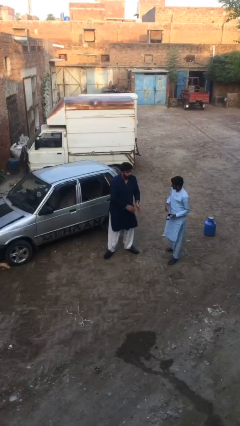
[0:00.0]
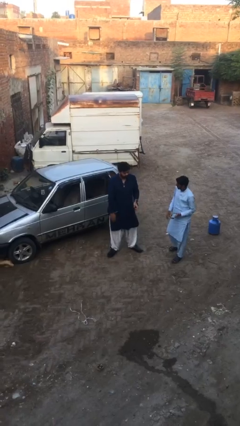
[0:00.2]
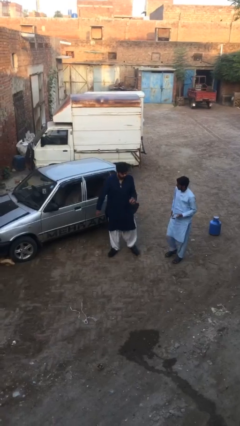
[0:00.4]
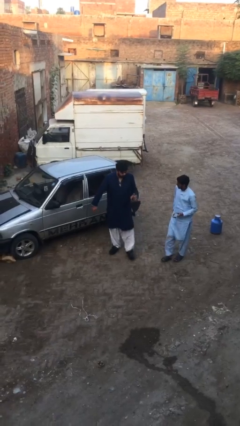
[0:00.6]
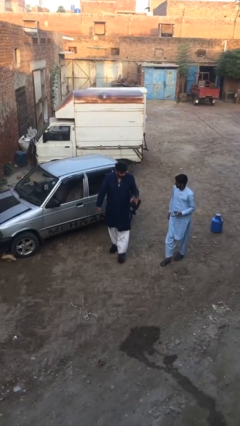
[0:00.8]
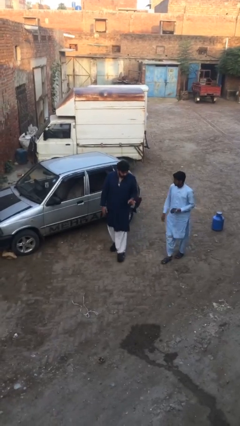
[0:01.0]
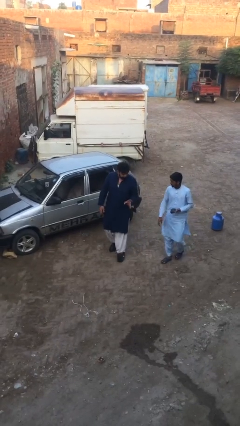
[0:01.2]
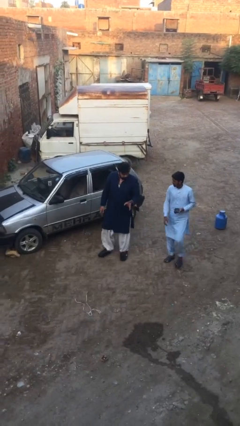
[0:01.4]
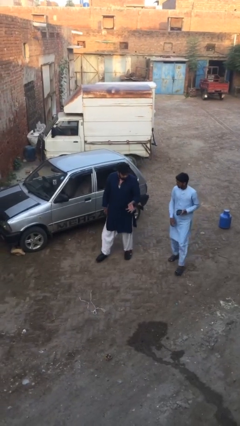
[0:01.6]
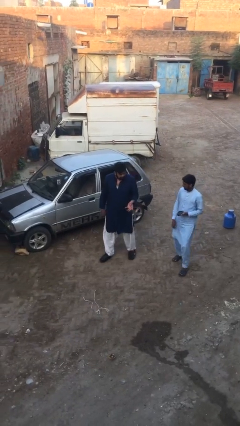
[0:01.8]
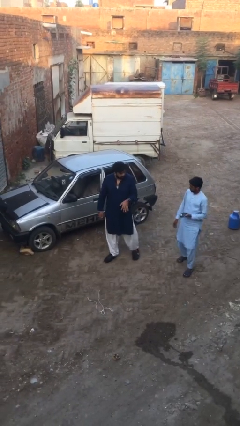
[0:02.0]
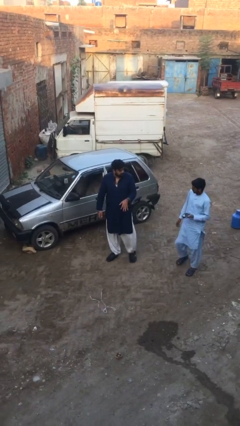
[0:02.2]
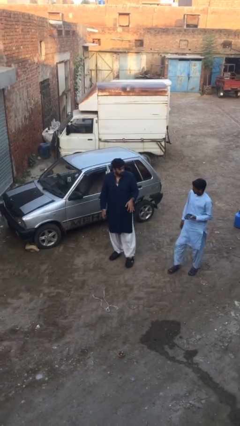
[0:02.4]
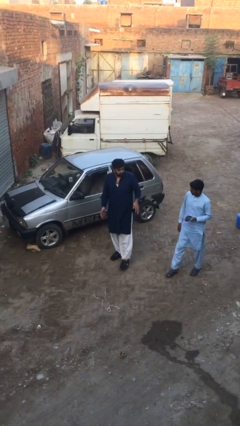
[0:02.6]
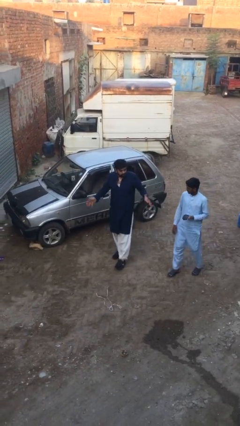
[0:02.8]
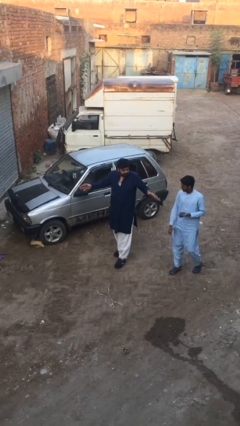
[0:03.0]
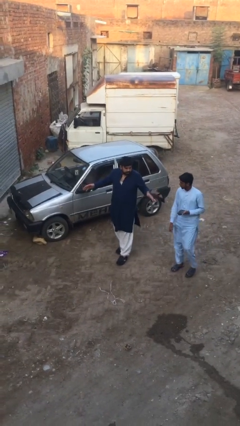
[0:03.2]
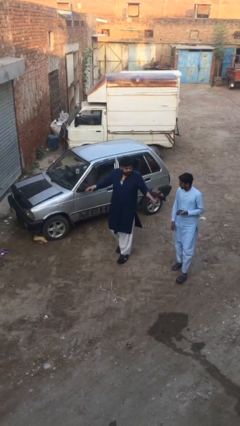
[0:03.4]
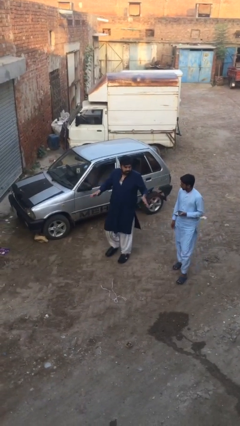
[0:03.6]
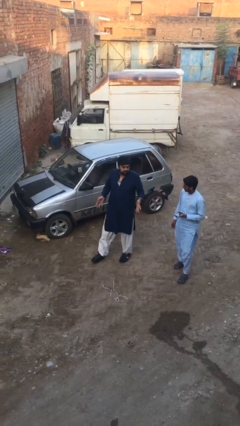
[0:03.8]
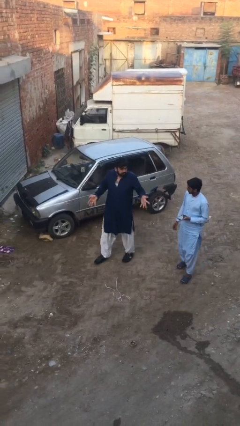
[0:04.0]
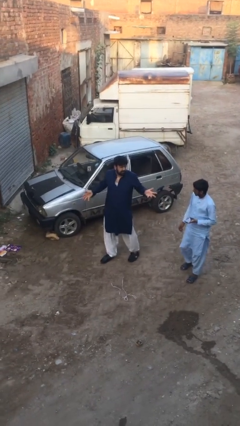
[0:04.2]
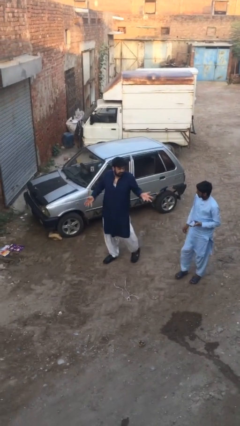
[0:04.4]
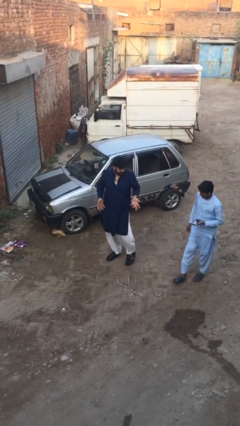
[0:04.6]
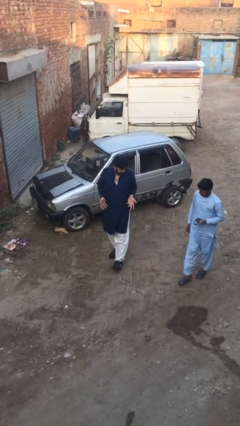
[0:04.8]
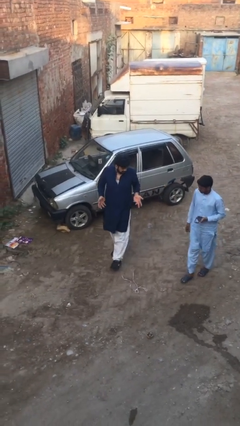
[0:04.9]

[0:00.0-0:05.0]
person talks to person

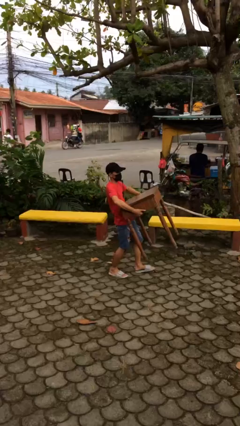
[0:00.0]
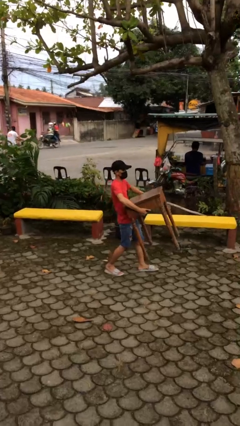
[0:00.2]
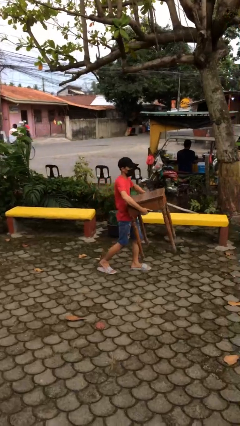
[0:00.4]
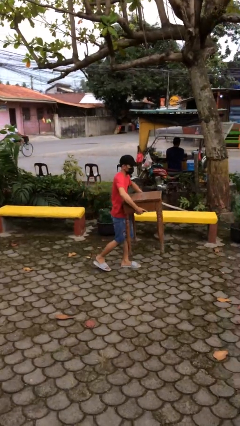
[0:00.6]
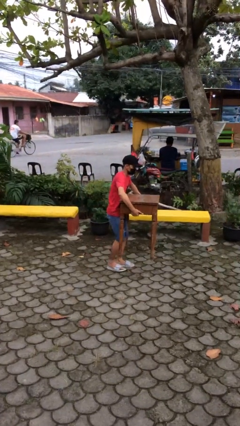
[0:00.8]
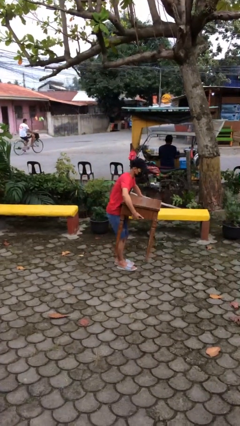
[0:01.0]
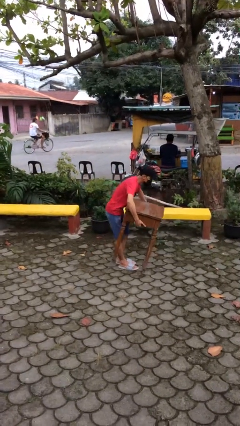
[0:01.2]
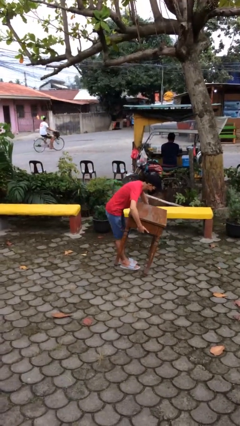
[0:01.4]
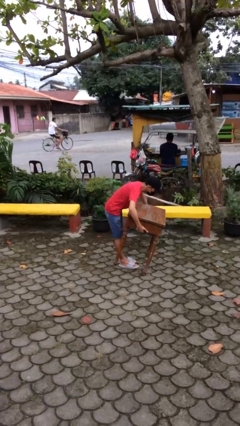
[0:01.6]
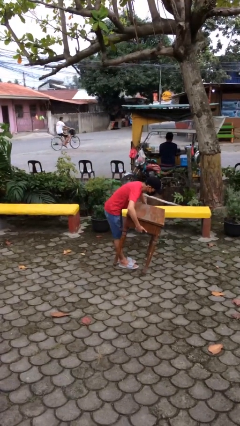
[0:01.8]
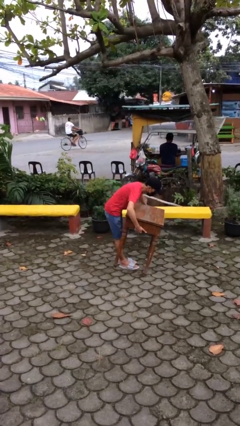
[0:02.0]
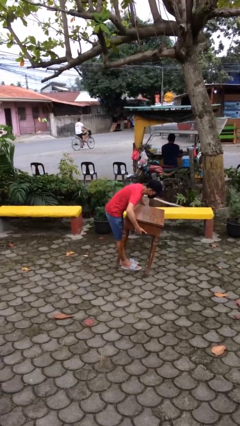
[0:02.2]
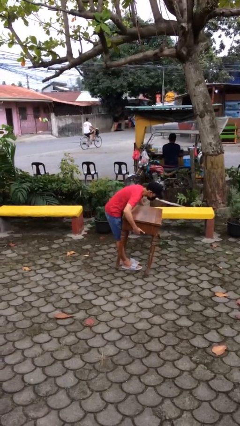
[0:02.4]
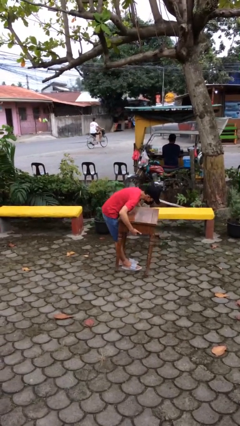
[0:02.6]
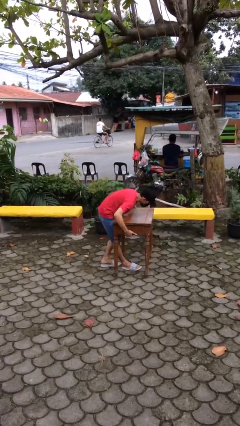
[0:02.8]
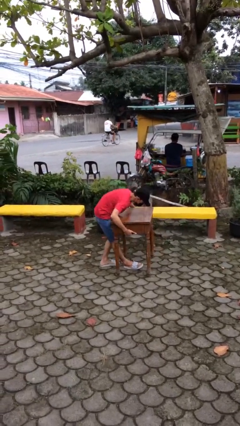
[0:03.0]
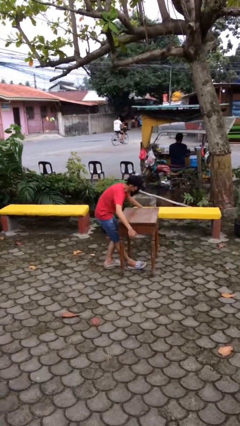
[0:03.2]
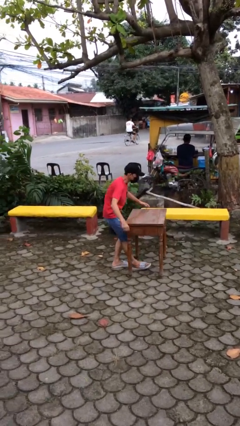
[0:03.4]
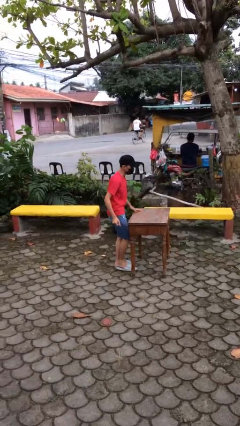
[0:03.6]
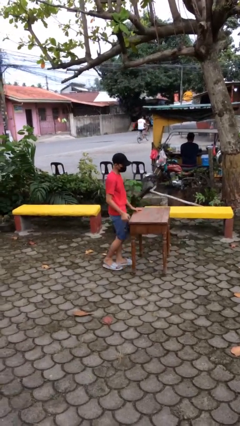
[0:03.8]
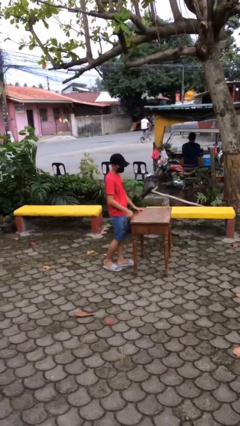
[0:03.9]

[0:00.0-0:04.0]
person puts down object on floor

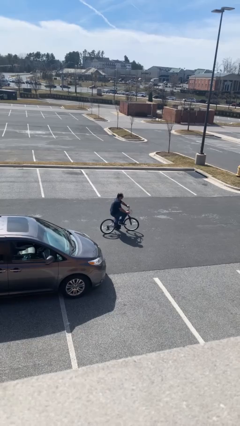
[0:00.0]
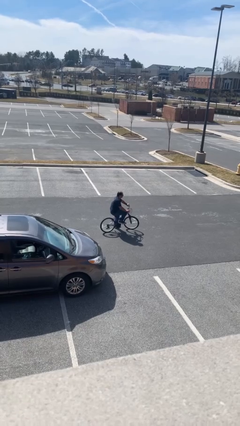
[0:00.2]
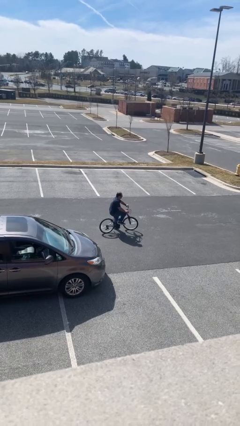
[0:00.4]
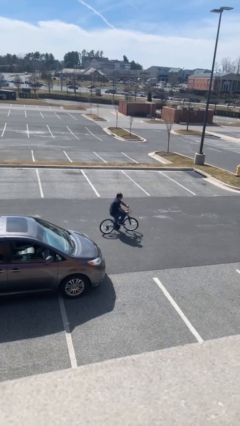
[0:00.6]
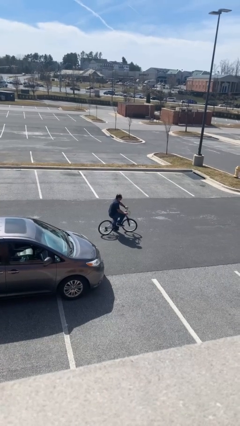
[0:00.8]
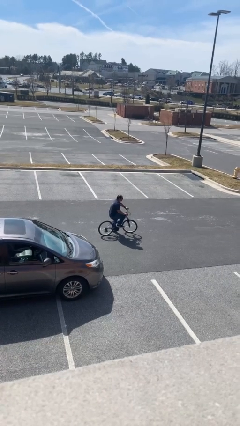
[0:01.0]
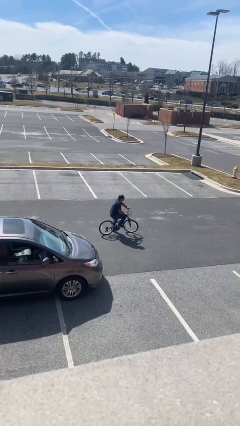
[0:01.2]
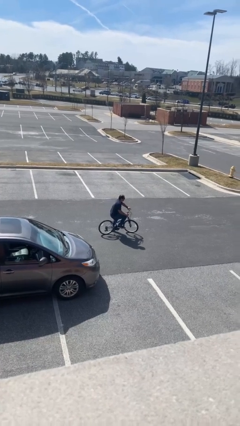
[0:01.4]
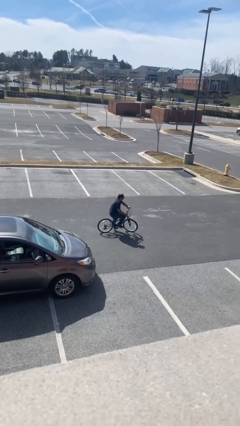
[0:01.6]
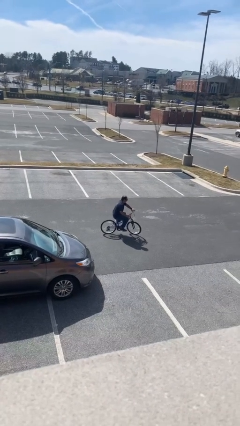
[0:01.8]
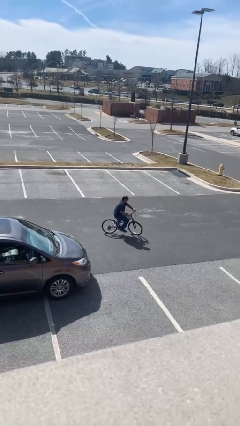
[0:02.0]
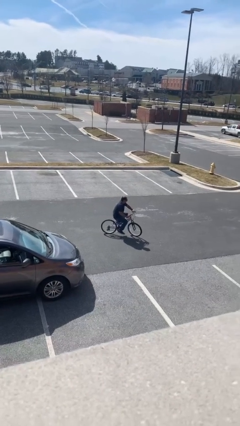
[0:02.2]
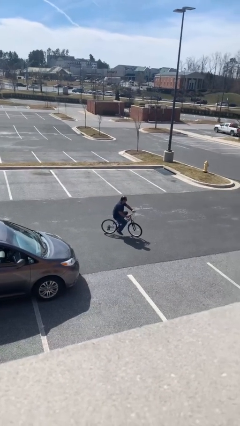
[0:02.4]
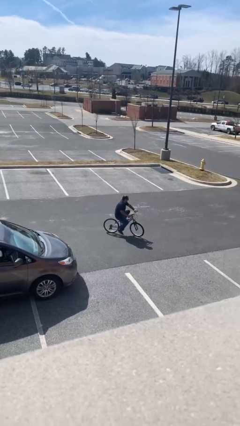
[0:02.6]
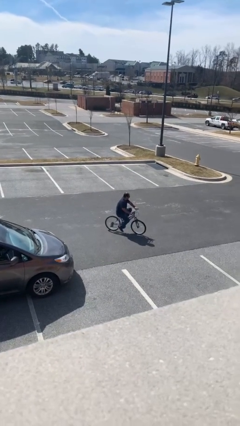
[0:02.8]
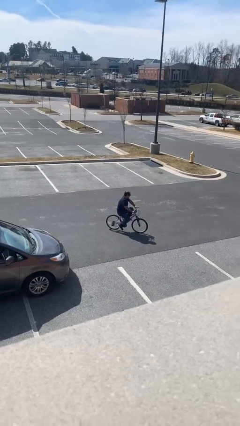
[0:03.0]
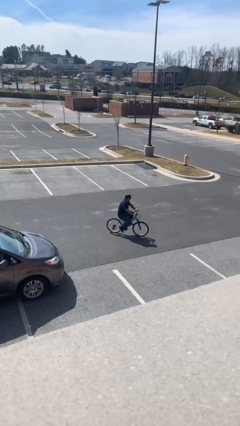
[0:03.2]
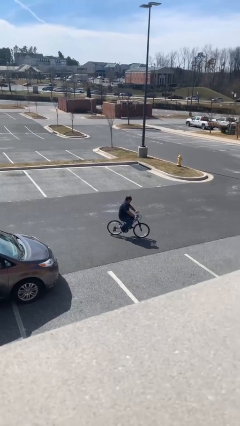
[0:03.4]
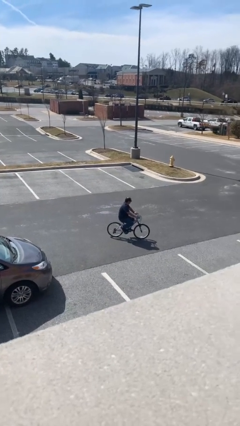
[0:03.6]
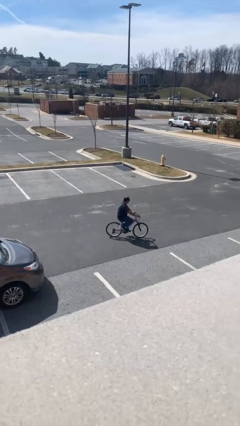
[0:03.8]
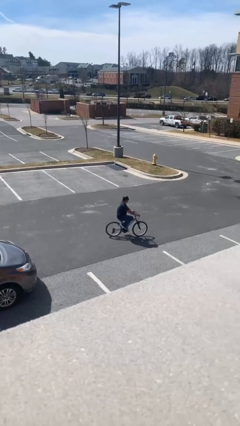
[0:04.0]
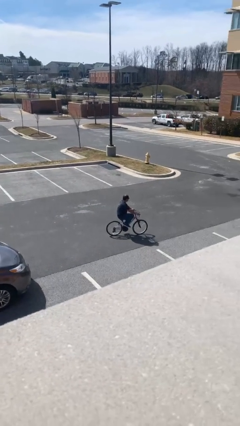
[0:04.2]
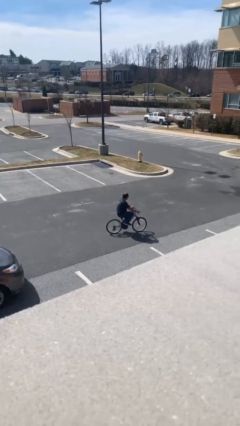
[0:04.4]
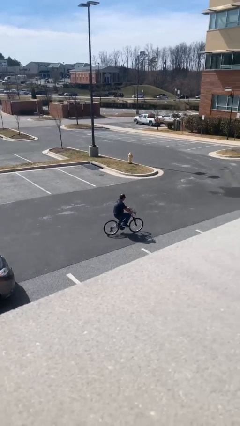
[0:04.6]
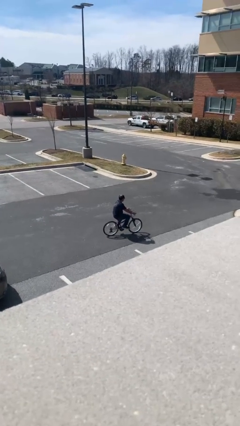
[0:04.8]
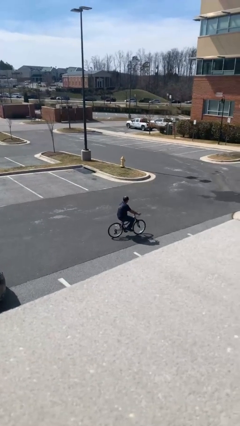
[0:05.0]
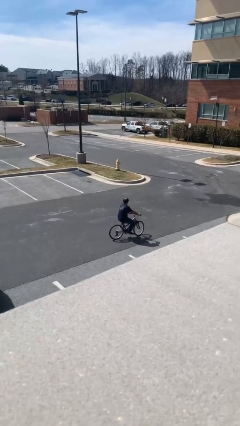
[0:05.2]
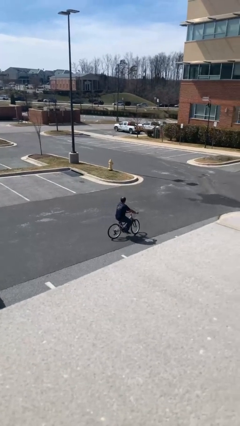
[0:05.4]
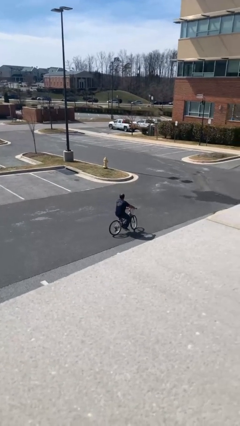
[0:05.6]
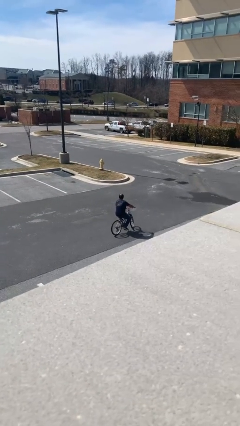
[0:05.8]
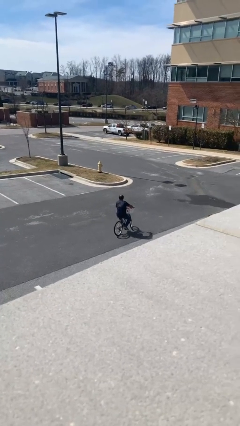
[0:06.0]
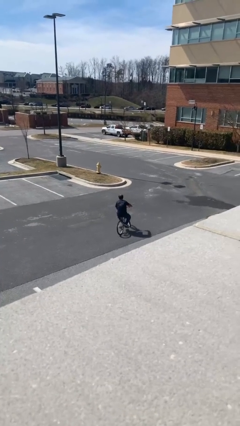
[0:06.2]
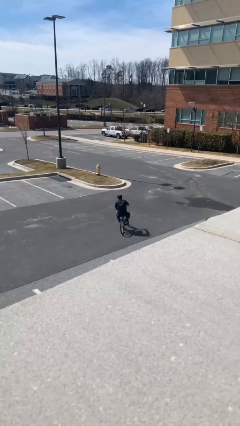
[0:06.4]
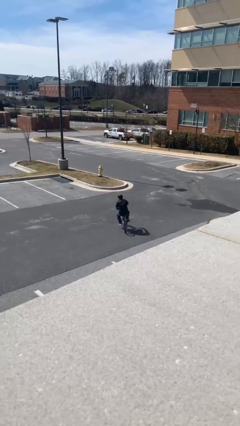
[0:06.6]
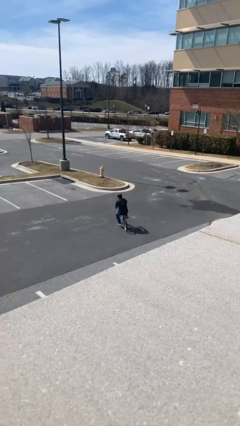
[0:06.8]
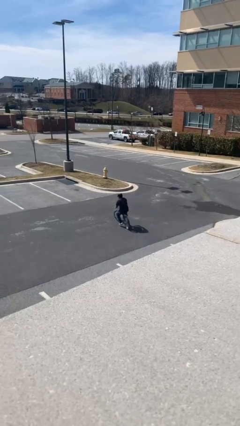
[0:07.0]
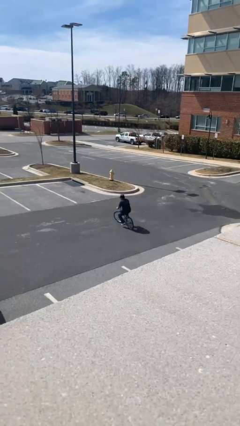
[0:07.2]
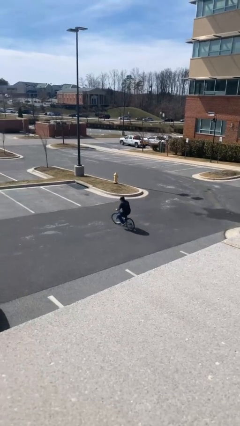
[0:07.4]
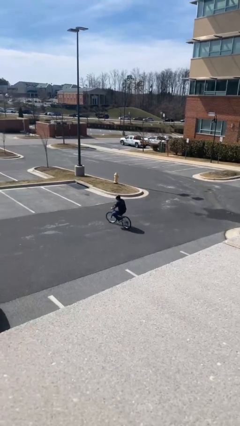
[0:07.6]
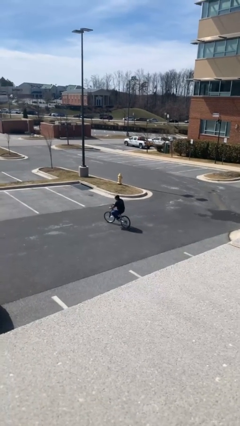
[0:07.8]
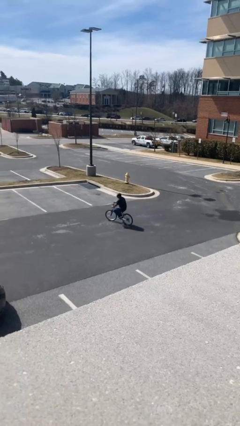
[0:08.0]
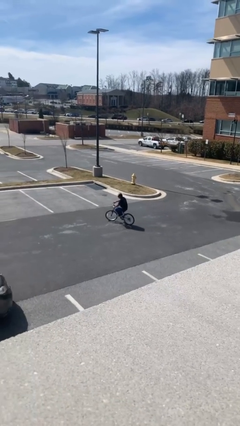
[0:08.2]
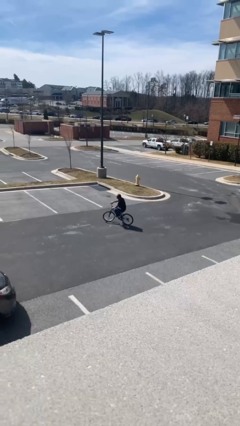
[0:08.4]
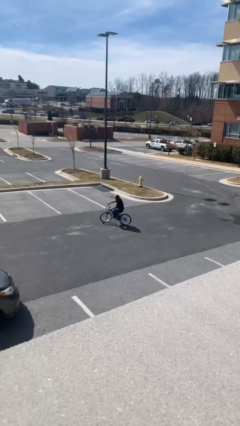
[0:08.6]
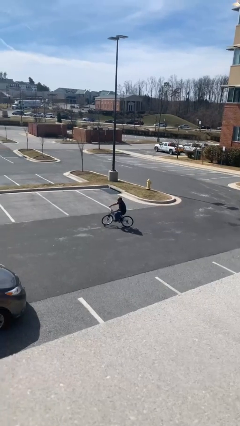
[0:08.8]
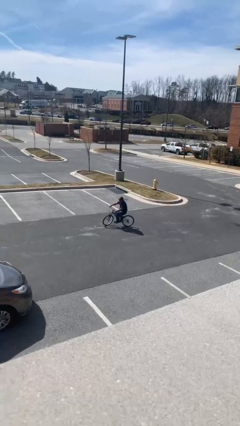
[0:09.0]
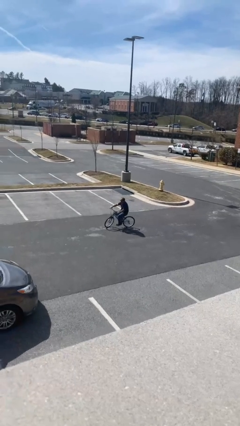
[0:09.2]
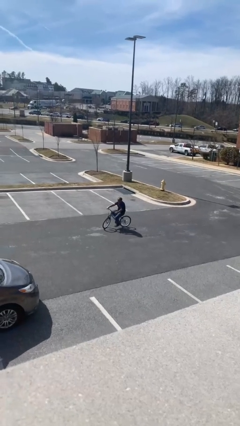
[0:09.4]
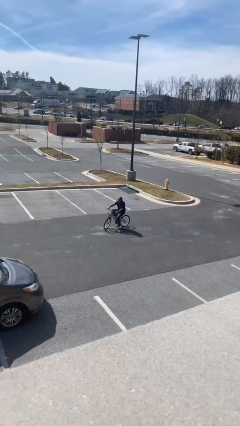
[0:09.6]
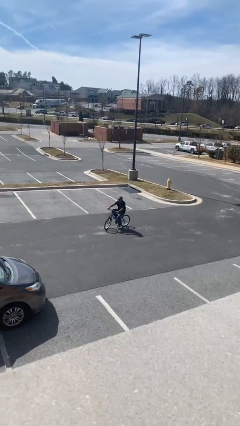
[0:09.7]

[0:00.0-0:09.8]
person rides bicycle
